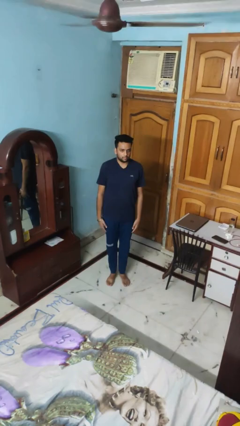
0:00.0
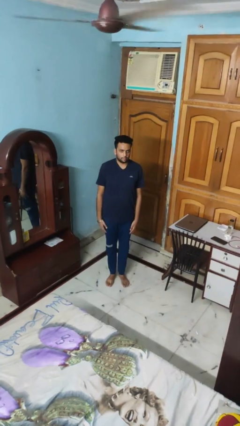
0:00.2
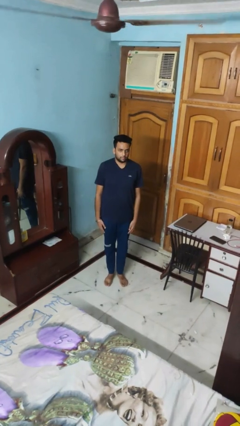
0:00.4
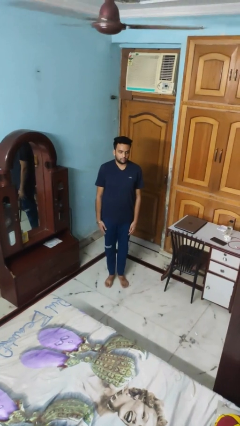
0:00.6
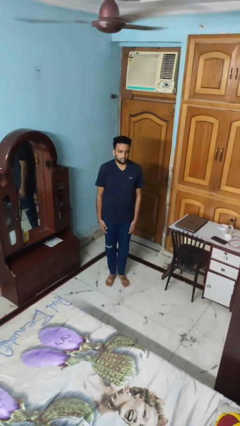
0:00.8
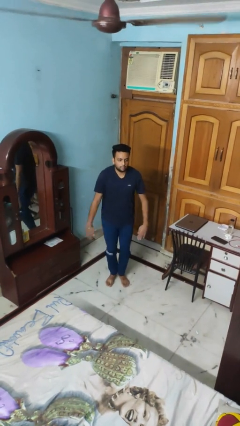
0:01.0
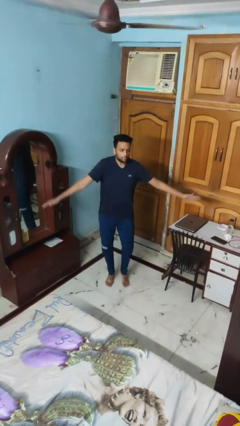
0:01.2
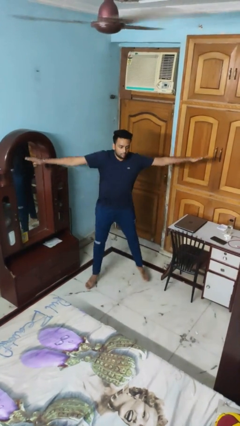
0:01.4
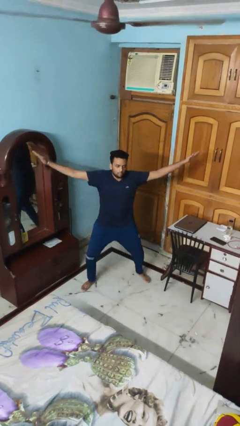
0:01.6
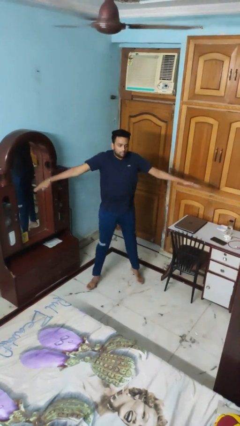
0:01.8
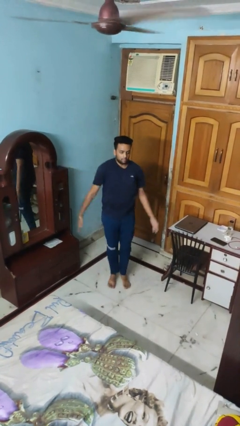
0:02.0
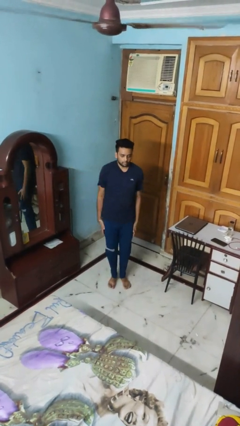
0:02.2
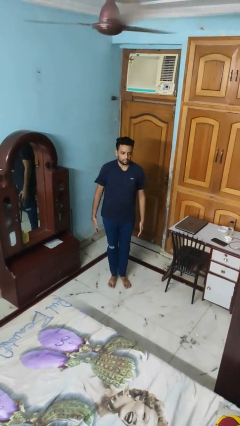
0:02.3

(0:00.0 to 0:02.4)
person exercises with jumping jacks

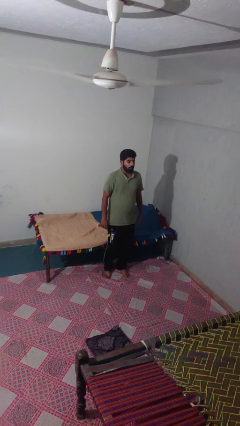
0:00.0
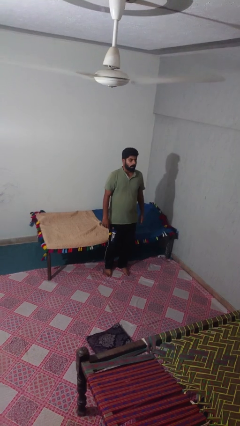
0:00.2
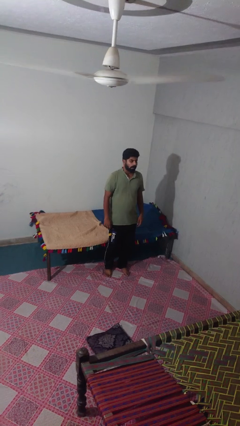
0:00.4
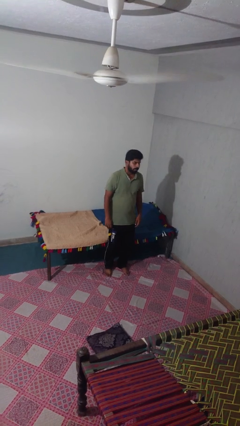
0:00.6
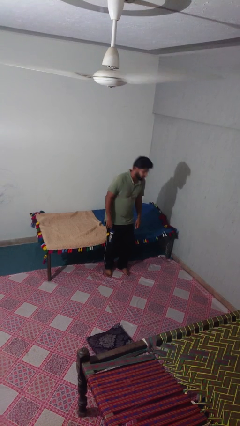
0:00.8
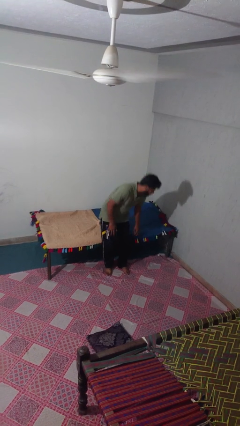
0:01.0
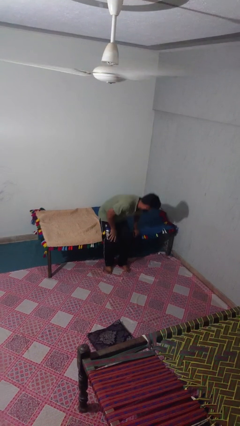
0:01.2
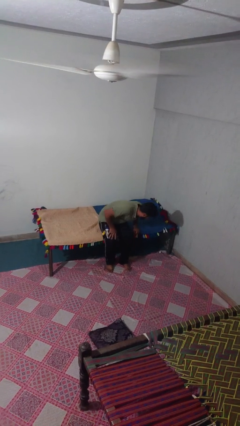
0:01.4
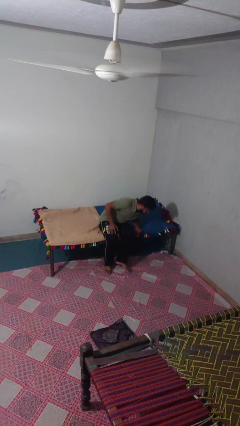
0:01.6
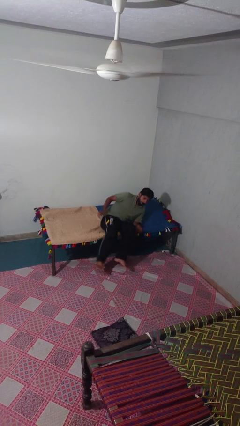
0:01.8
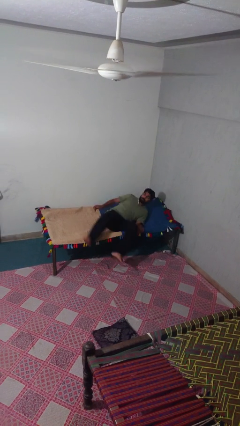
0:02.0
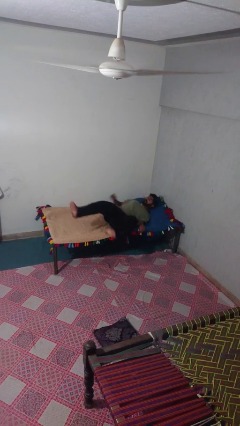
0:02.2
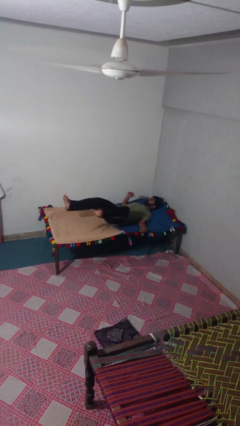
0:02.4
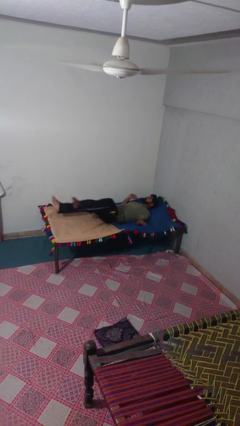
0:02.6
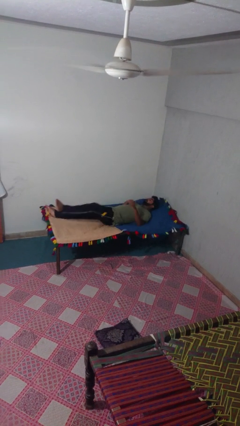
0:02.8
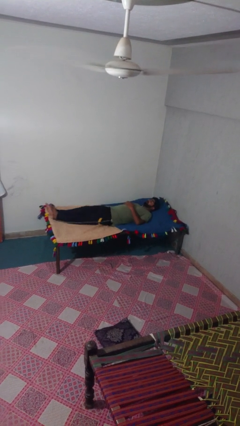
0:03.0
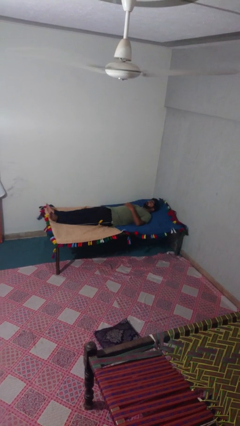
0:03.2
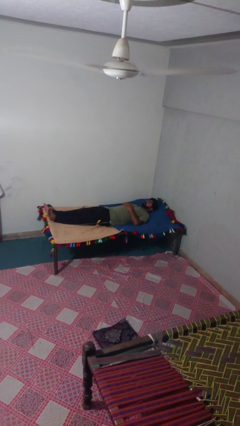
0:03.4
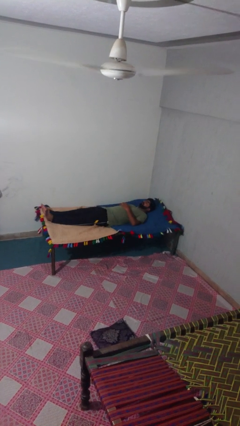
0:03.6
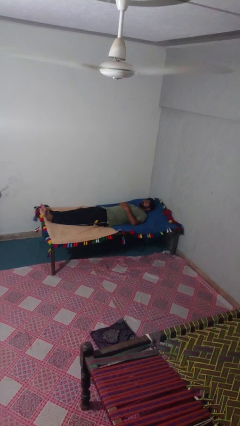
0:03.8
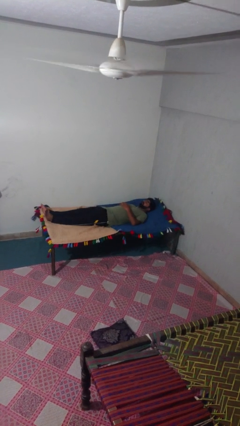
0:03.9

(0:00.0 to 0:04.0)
person lies down on bed

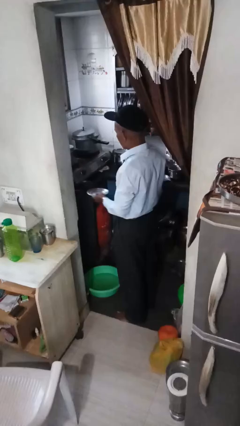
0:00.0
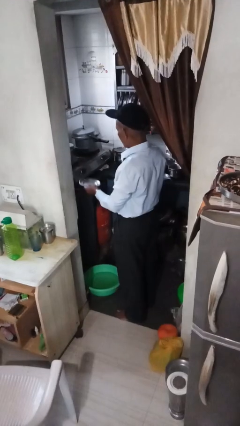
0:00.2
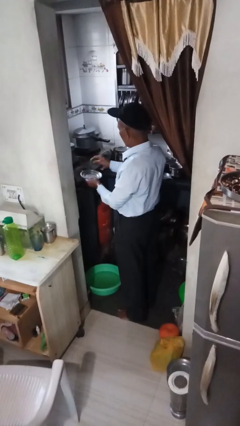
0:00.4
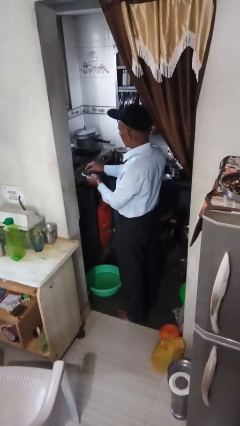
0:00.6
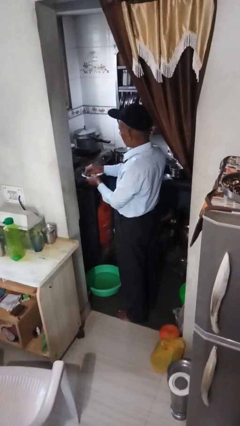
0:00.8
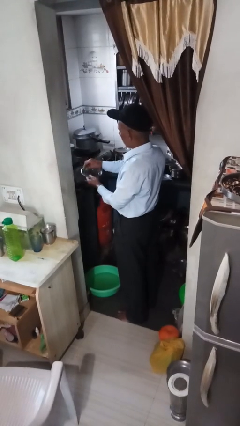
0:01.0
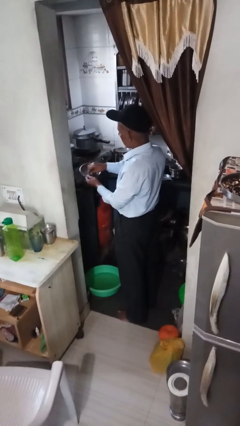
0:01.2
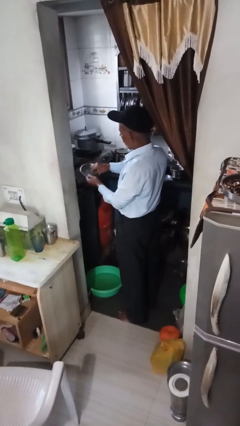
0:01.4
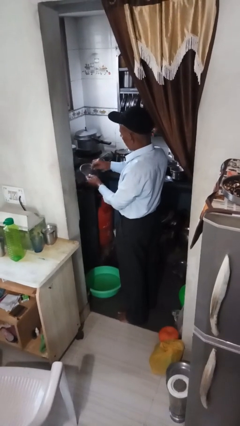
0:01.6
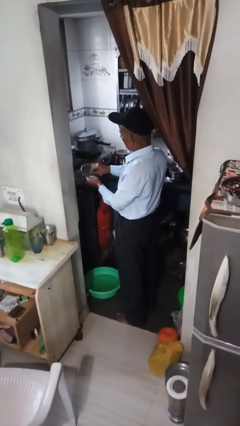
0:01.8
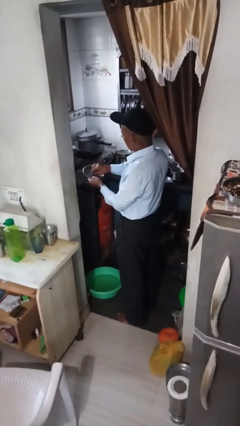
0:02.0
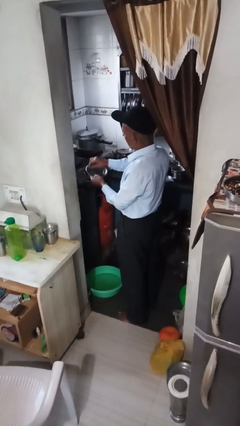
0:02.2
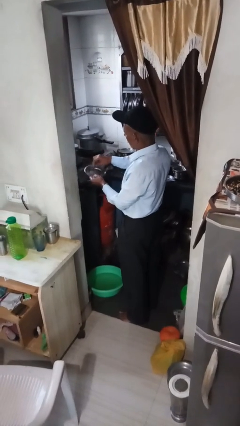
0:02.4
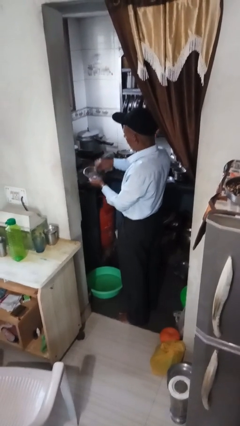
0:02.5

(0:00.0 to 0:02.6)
person washes dish

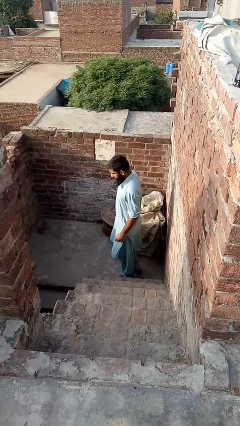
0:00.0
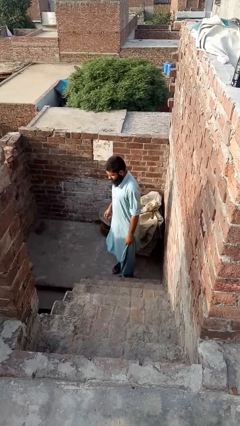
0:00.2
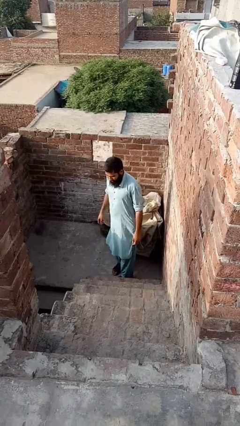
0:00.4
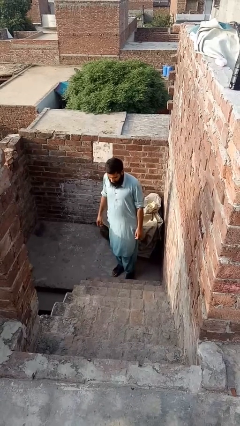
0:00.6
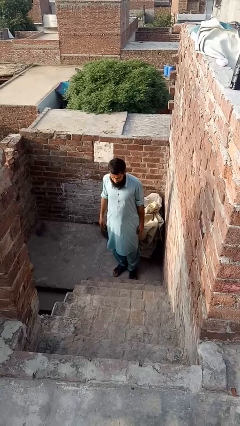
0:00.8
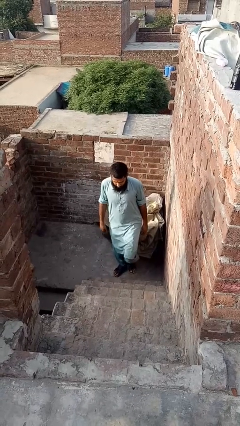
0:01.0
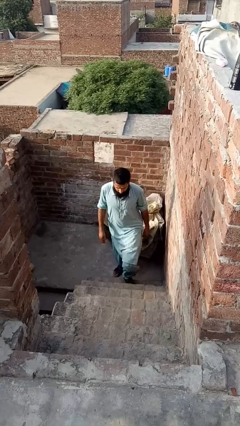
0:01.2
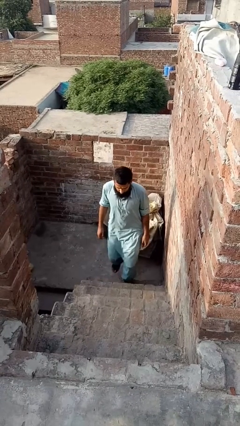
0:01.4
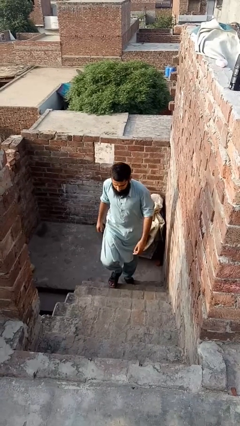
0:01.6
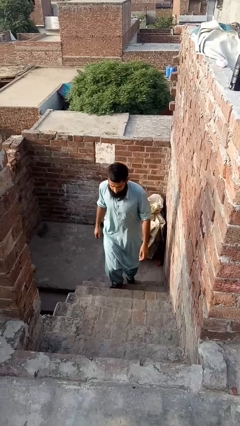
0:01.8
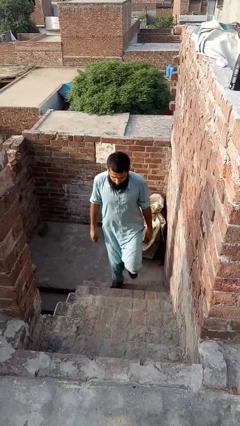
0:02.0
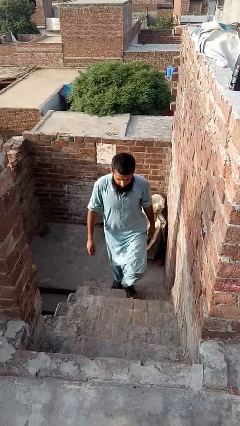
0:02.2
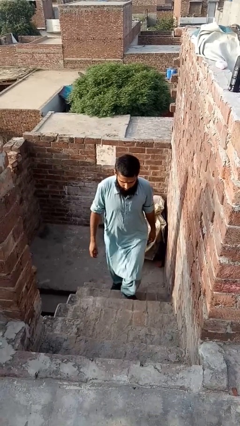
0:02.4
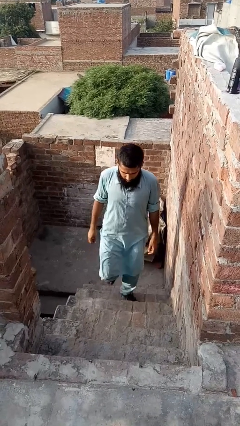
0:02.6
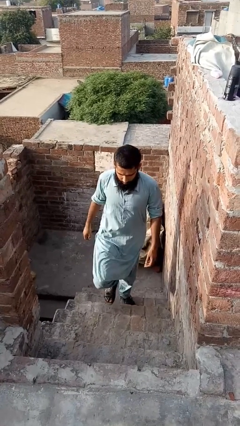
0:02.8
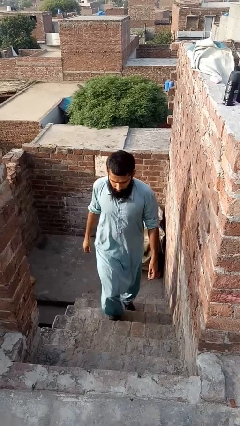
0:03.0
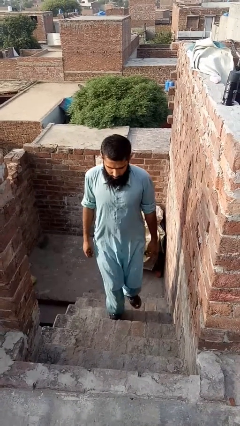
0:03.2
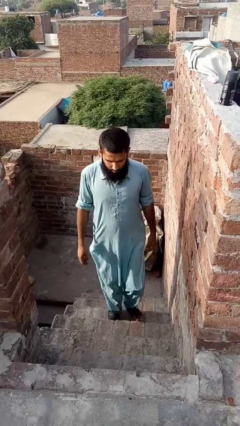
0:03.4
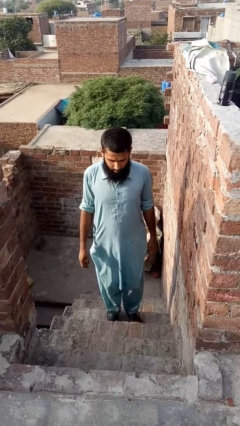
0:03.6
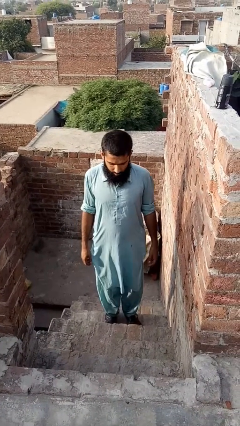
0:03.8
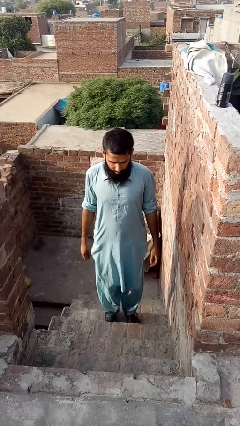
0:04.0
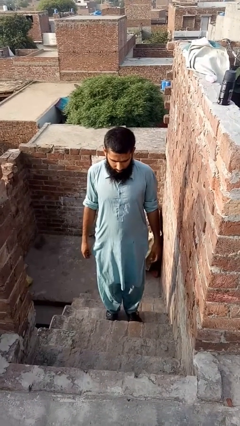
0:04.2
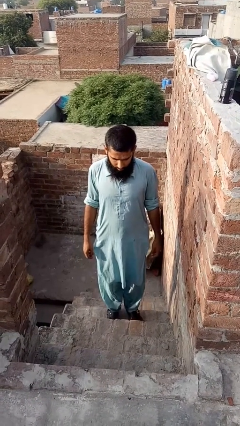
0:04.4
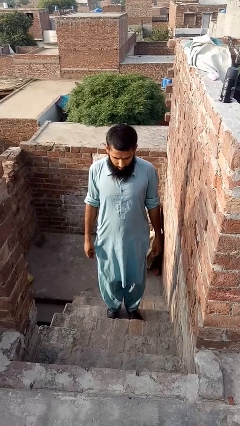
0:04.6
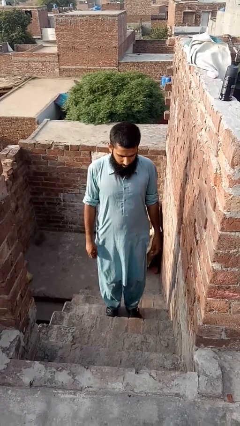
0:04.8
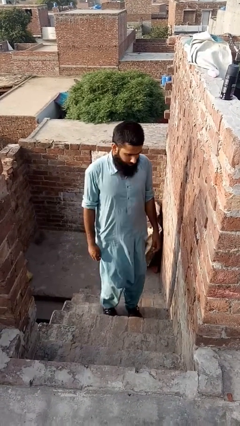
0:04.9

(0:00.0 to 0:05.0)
person climbs up stairs

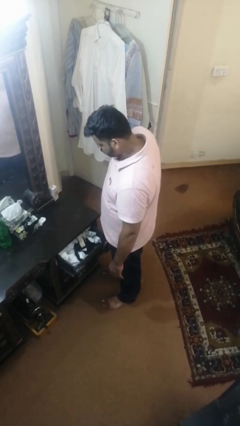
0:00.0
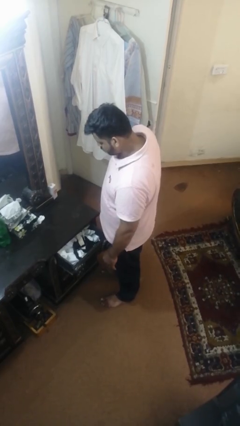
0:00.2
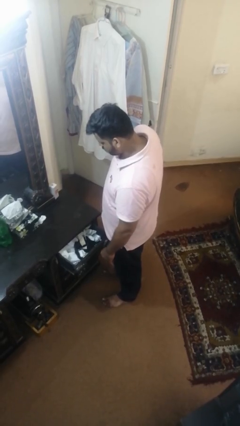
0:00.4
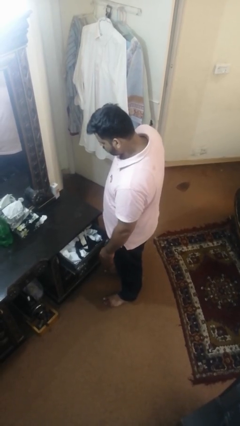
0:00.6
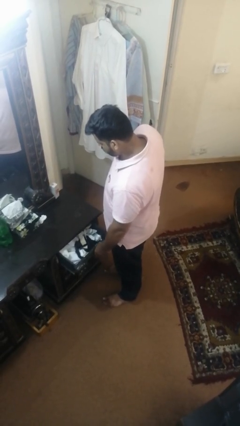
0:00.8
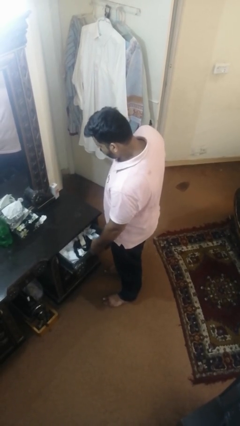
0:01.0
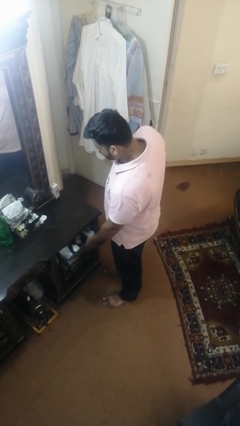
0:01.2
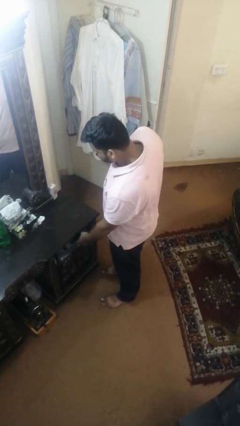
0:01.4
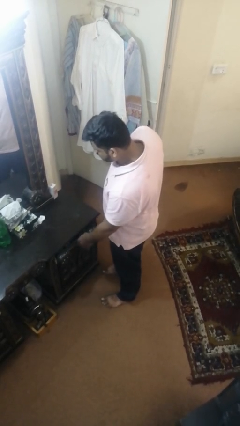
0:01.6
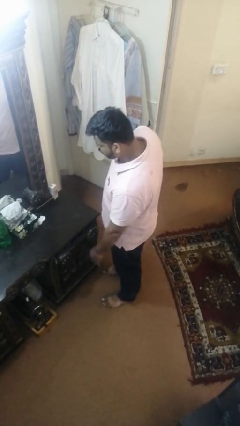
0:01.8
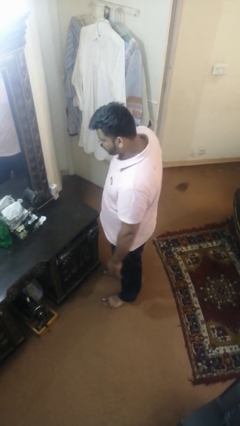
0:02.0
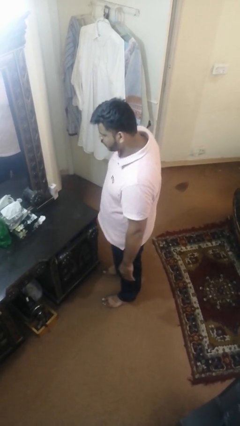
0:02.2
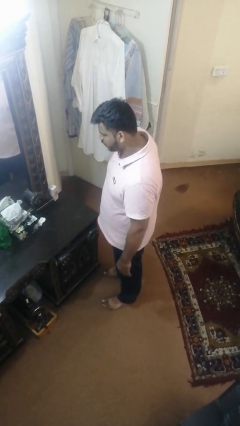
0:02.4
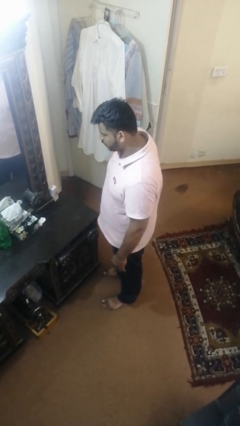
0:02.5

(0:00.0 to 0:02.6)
person closes dresser drawer

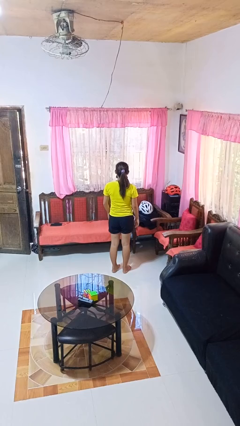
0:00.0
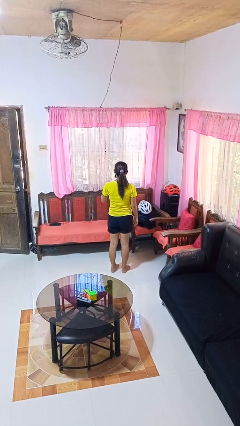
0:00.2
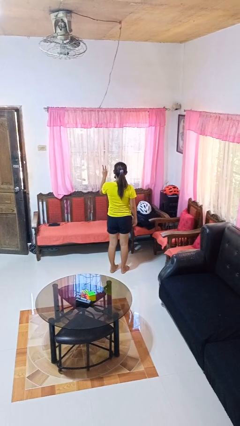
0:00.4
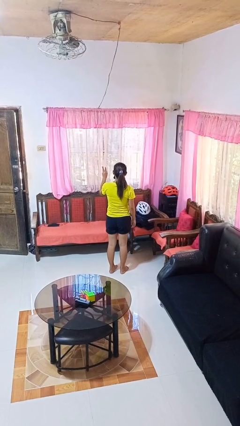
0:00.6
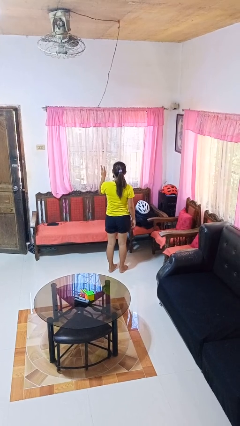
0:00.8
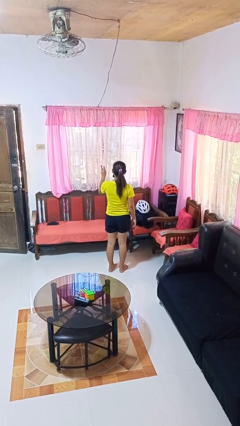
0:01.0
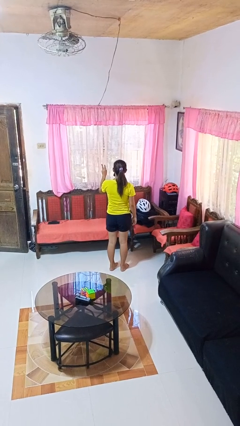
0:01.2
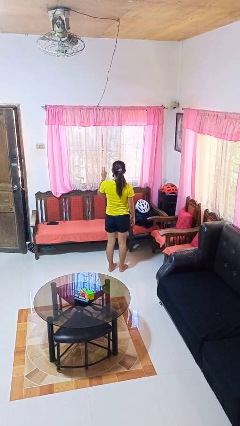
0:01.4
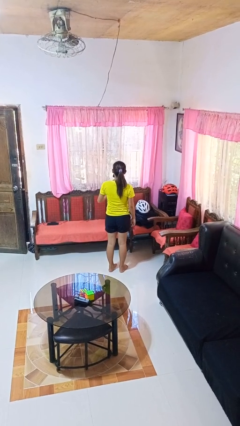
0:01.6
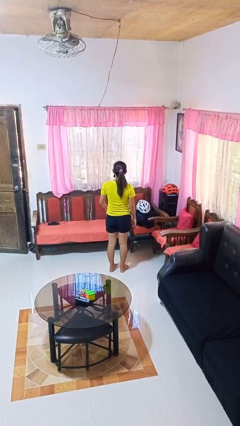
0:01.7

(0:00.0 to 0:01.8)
person gestures number three
